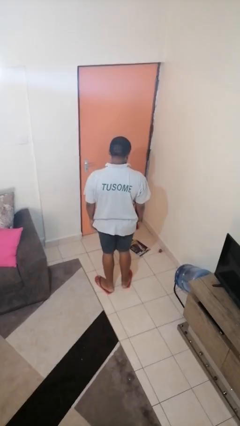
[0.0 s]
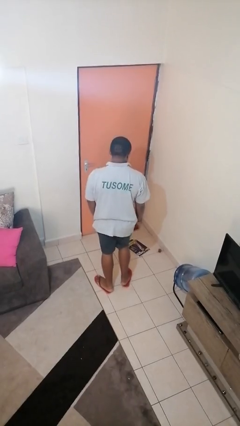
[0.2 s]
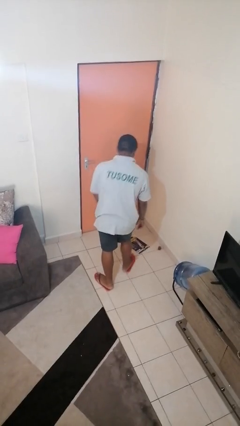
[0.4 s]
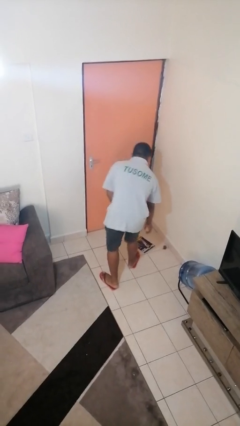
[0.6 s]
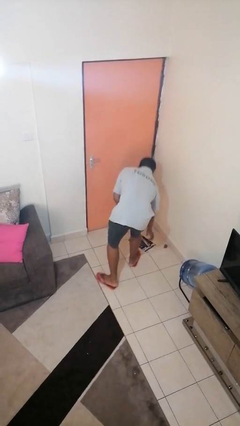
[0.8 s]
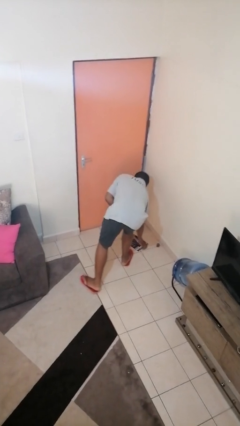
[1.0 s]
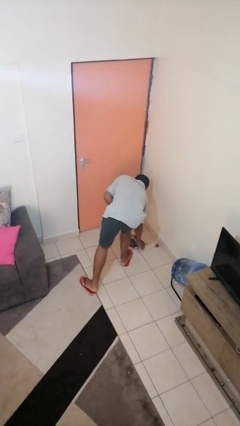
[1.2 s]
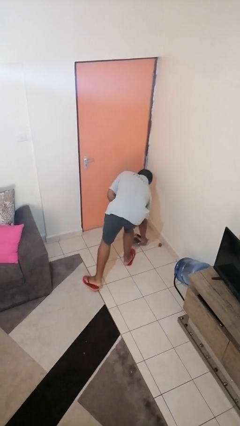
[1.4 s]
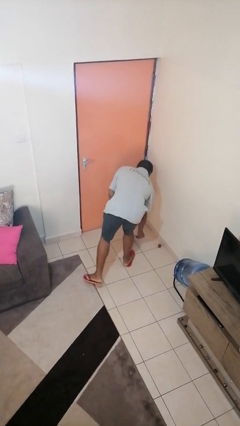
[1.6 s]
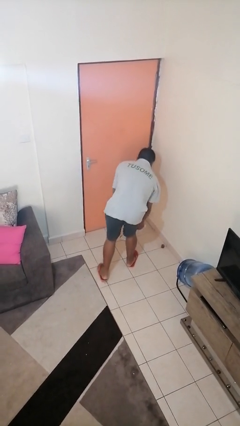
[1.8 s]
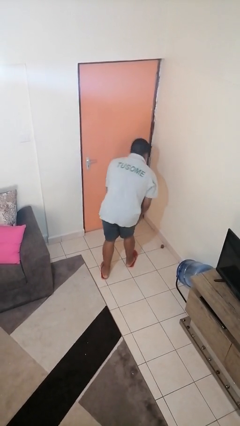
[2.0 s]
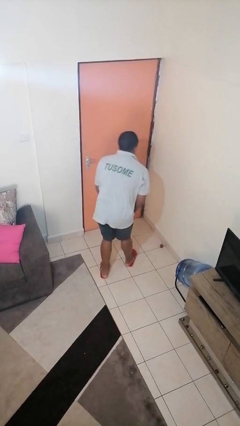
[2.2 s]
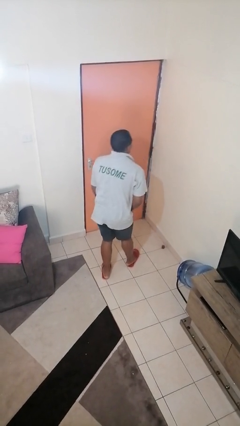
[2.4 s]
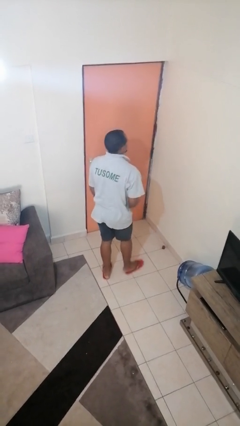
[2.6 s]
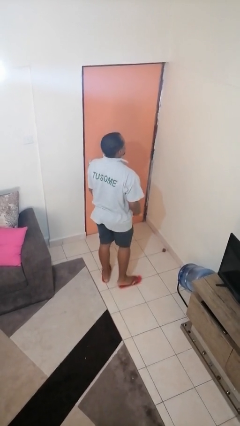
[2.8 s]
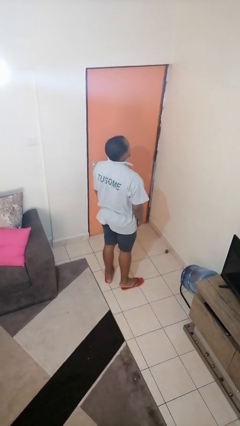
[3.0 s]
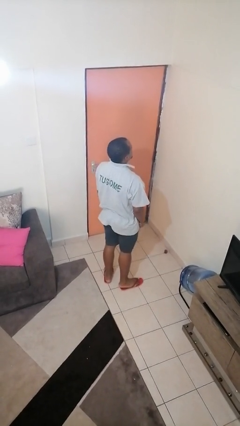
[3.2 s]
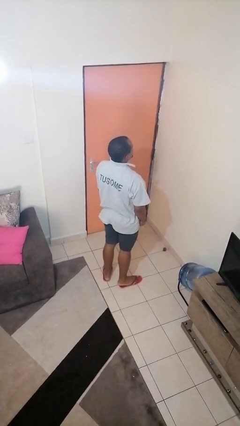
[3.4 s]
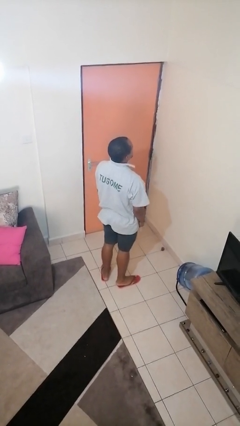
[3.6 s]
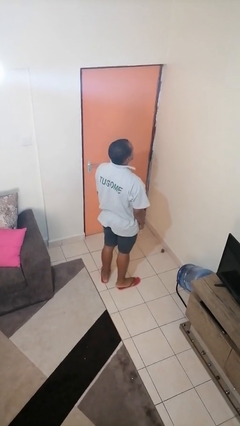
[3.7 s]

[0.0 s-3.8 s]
person picks up object from floor

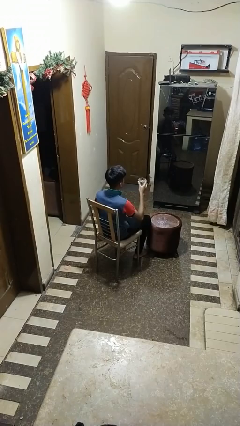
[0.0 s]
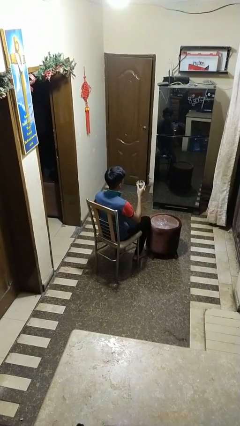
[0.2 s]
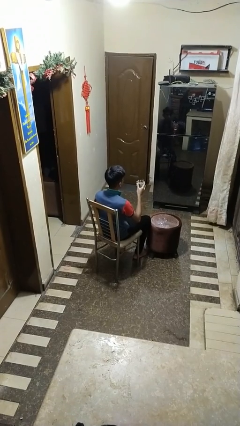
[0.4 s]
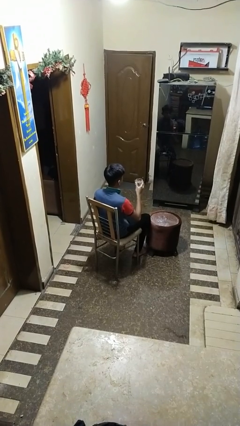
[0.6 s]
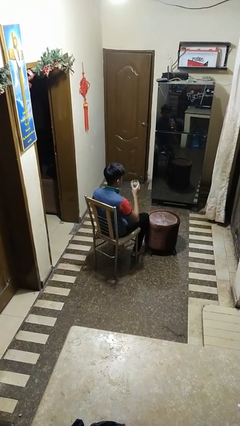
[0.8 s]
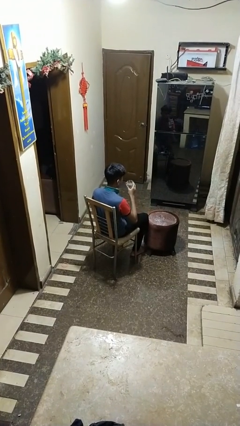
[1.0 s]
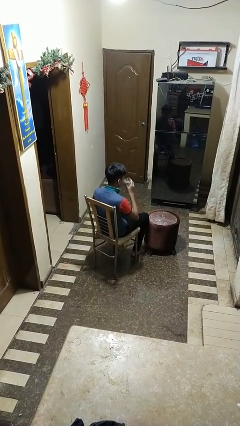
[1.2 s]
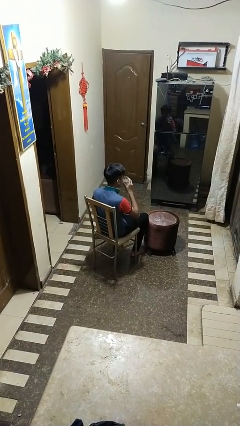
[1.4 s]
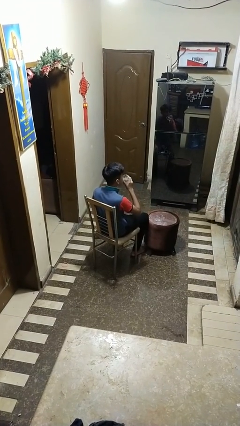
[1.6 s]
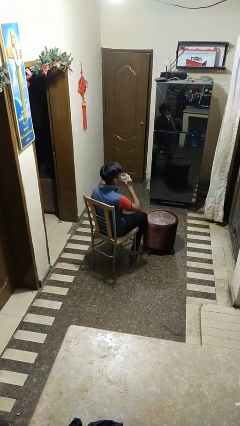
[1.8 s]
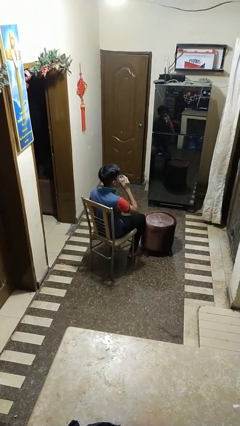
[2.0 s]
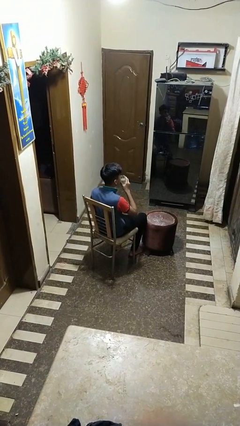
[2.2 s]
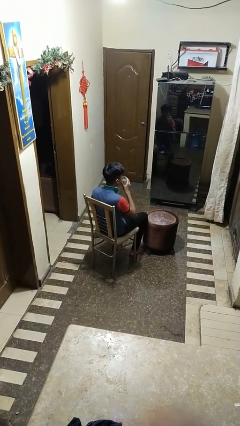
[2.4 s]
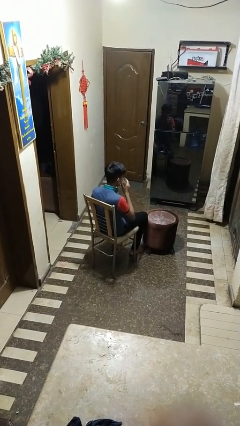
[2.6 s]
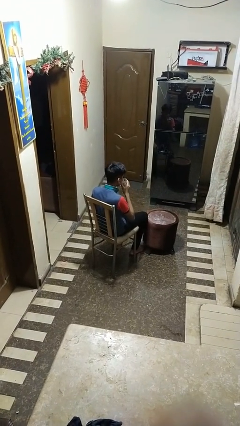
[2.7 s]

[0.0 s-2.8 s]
person drinks from shotglass

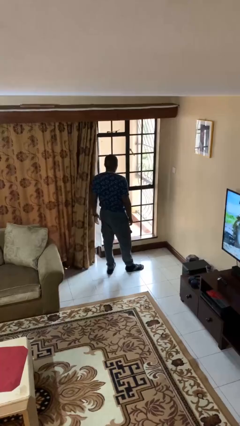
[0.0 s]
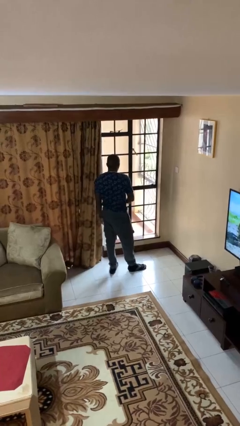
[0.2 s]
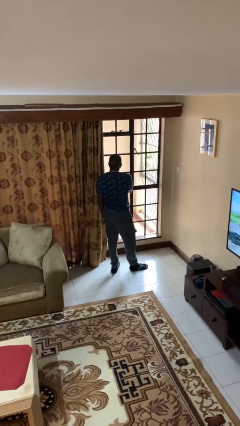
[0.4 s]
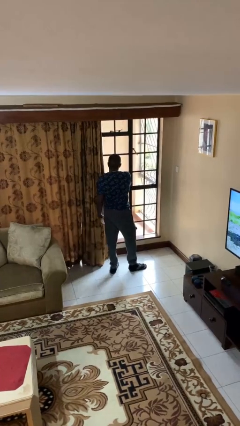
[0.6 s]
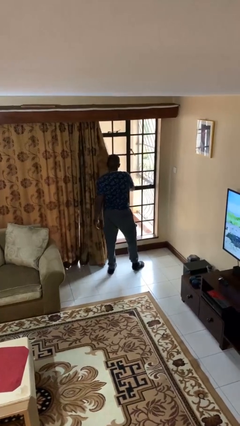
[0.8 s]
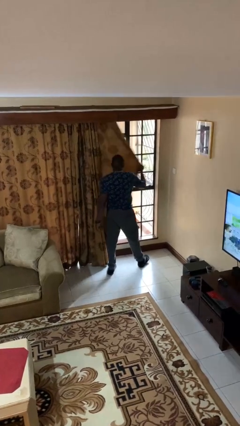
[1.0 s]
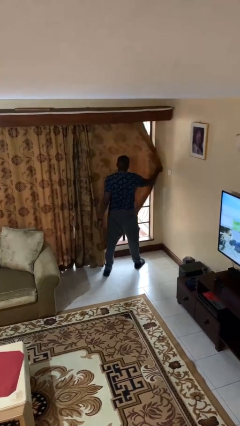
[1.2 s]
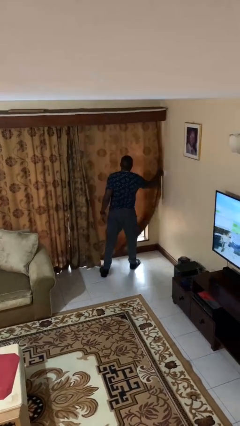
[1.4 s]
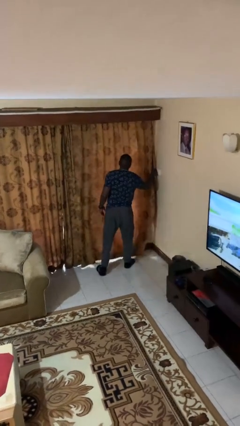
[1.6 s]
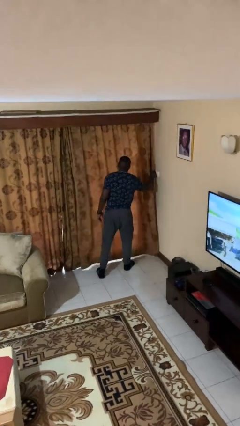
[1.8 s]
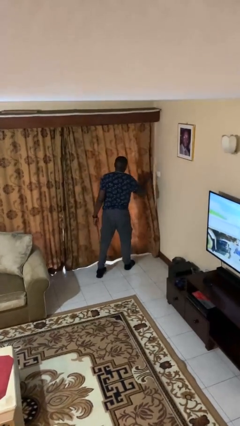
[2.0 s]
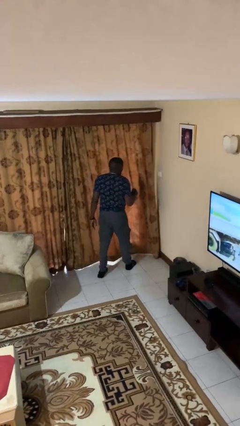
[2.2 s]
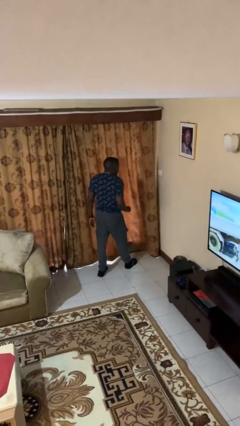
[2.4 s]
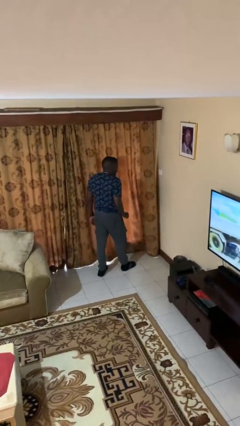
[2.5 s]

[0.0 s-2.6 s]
person closes curtains

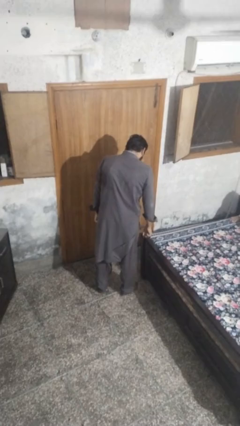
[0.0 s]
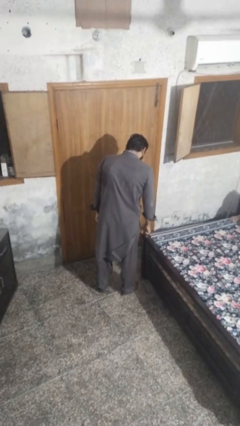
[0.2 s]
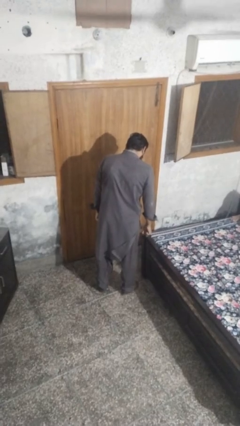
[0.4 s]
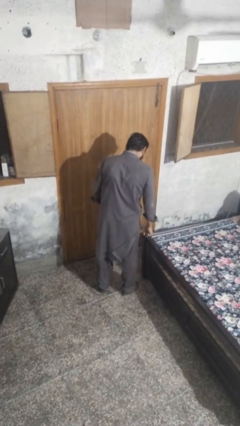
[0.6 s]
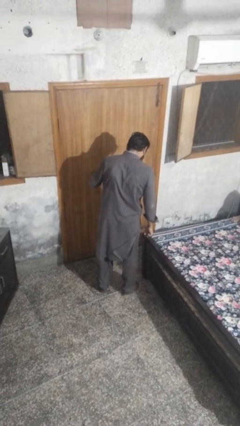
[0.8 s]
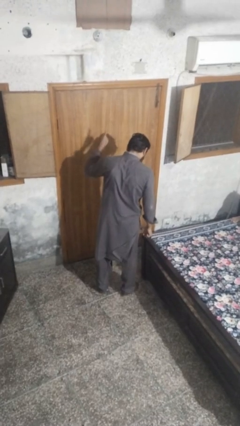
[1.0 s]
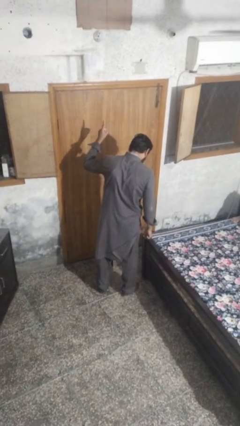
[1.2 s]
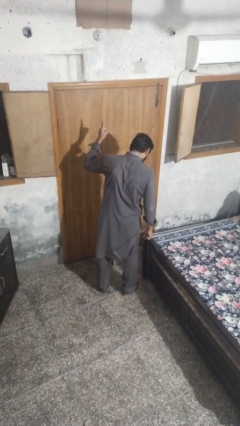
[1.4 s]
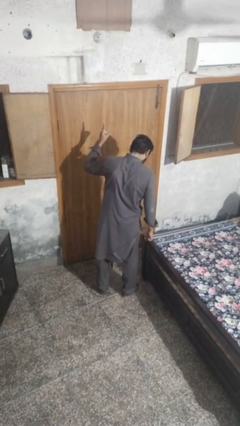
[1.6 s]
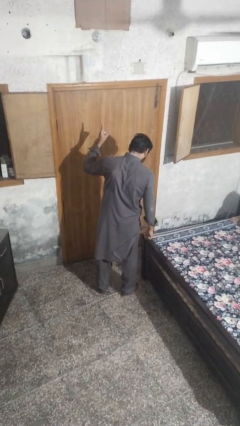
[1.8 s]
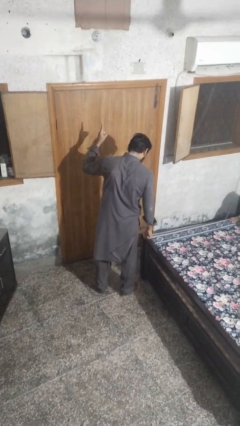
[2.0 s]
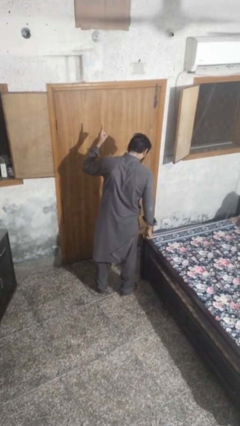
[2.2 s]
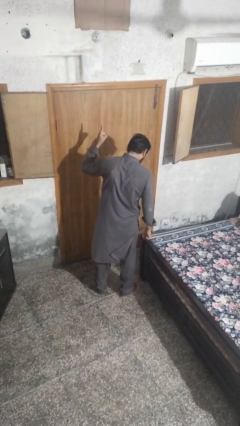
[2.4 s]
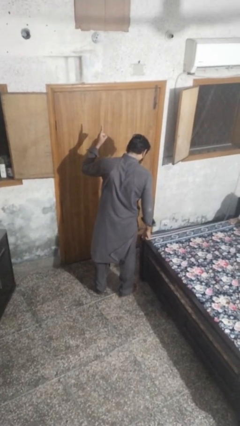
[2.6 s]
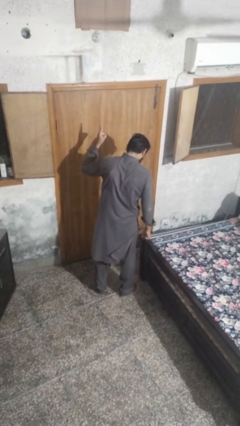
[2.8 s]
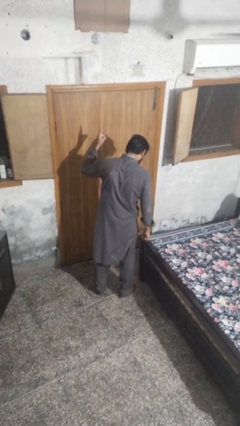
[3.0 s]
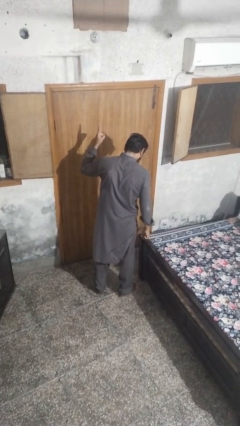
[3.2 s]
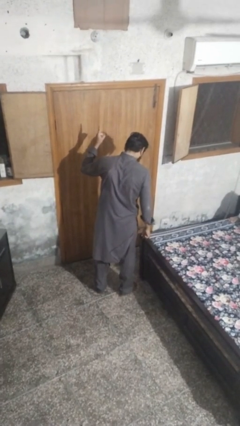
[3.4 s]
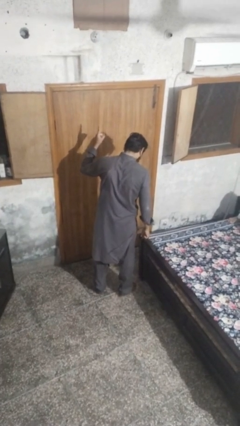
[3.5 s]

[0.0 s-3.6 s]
person gestures number one

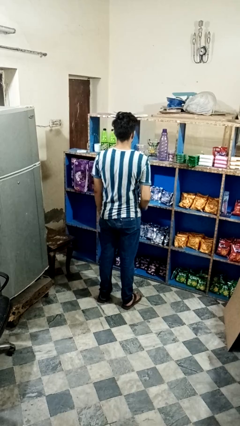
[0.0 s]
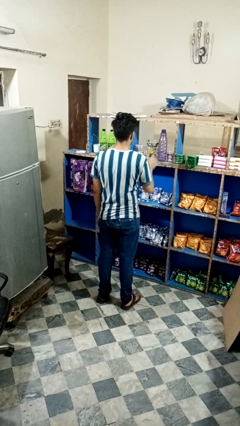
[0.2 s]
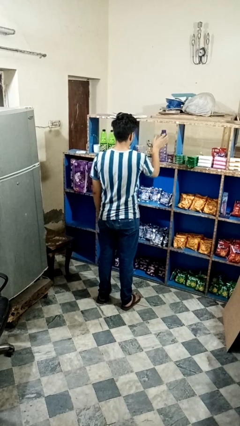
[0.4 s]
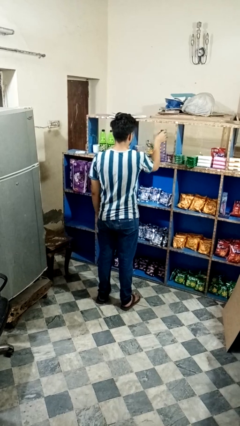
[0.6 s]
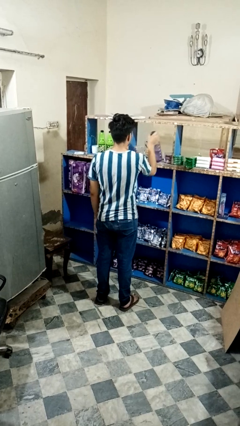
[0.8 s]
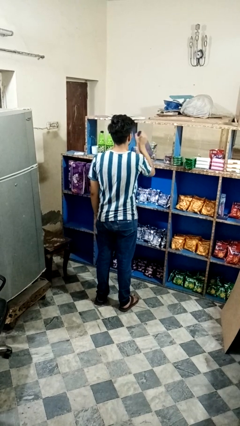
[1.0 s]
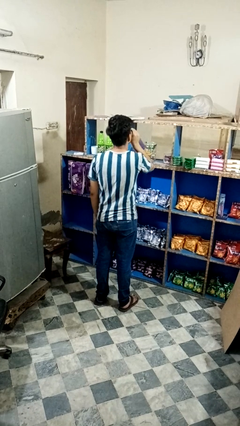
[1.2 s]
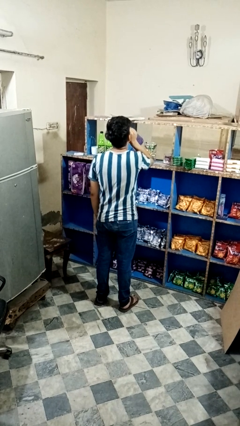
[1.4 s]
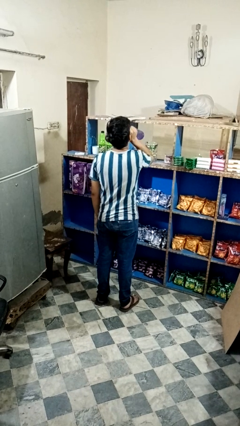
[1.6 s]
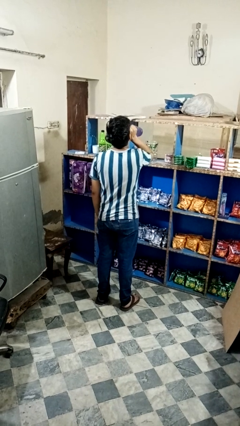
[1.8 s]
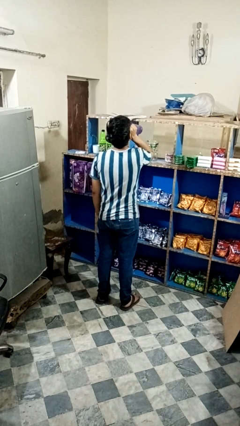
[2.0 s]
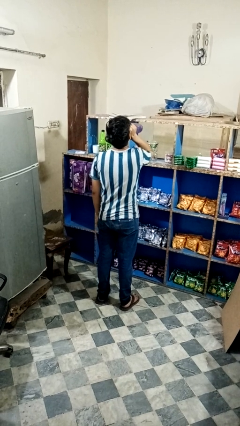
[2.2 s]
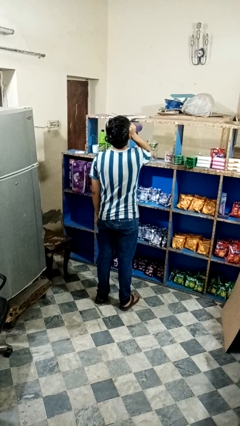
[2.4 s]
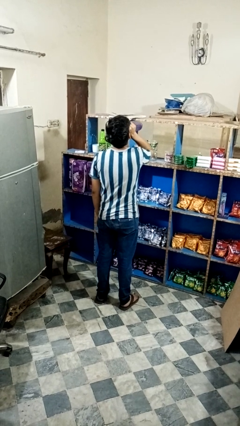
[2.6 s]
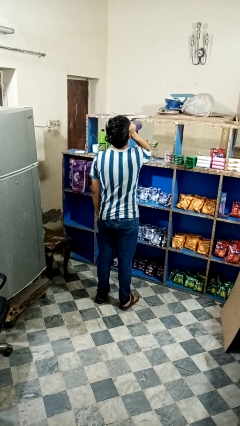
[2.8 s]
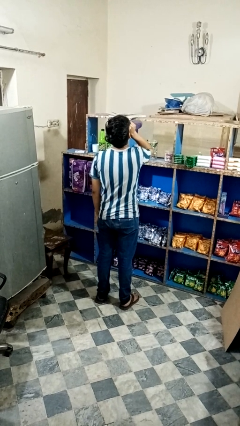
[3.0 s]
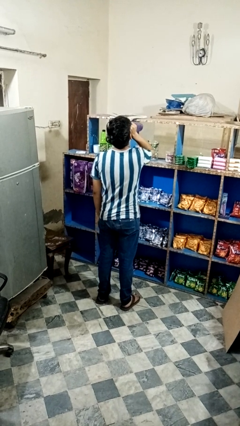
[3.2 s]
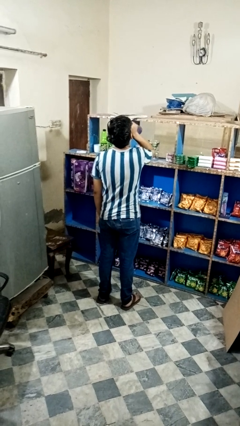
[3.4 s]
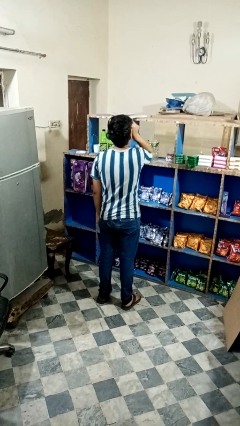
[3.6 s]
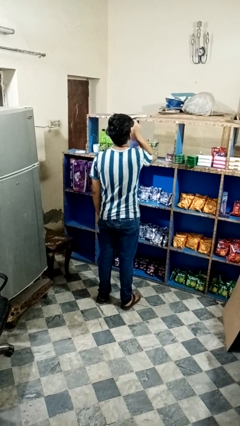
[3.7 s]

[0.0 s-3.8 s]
person drinks from bottle

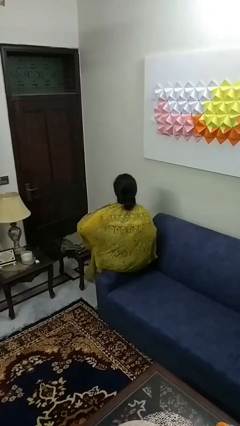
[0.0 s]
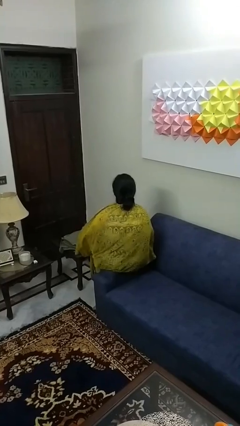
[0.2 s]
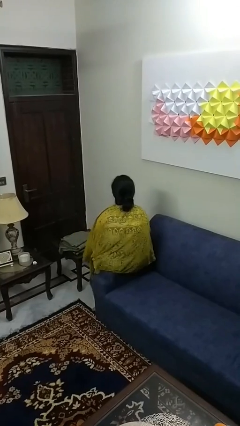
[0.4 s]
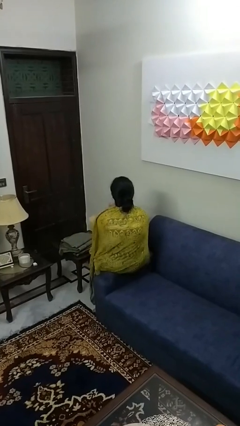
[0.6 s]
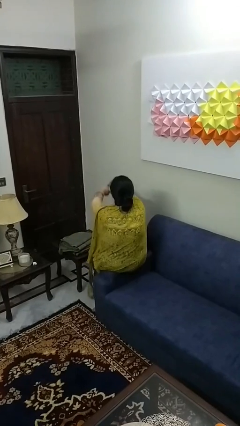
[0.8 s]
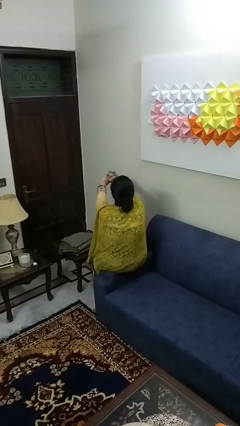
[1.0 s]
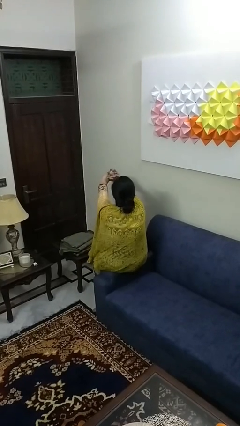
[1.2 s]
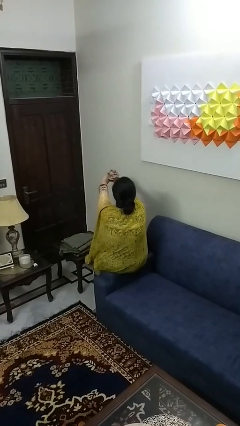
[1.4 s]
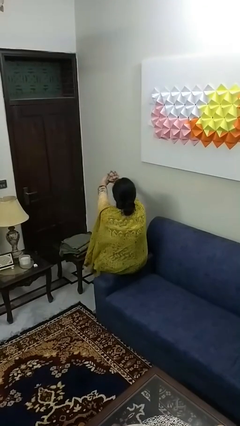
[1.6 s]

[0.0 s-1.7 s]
person cracks knuckles
